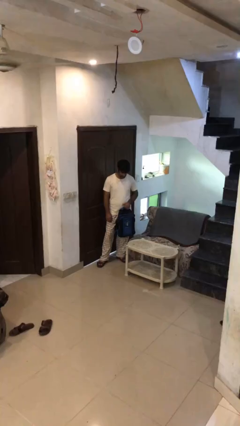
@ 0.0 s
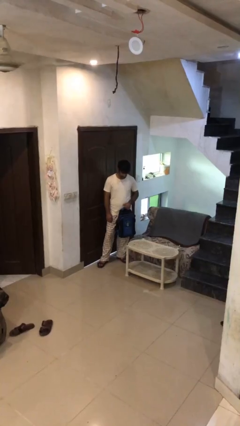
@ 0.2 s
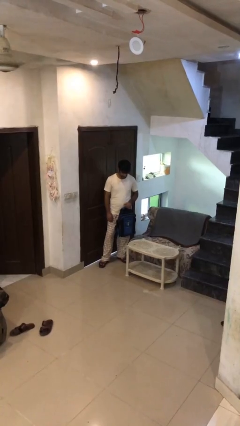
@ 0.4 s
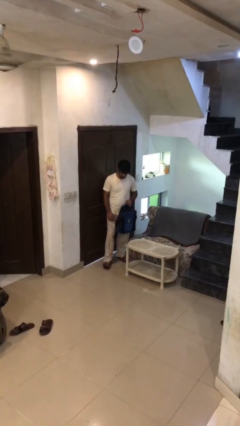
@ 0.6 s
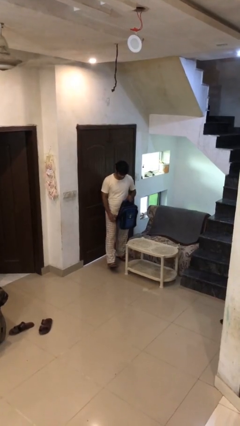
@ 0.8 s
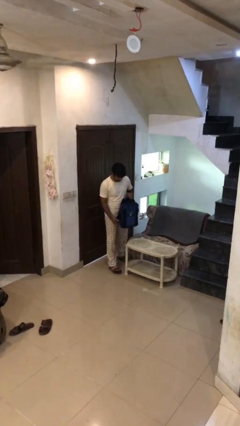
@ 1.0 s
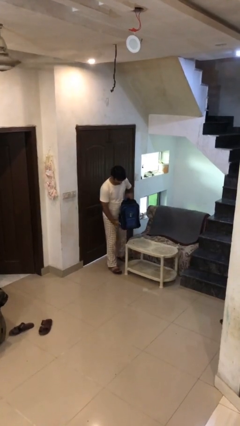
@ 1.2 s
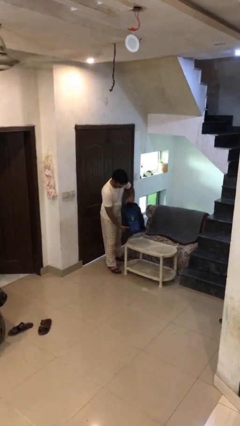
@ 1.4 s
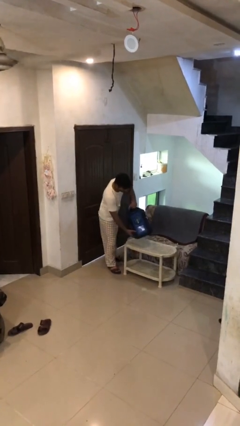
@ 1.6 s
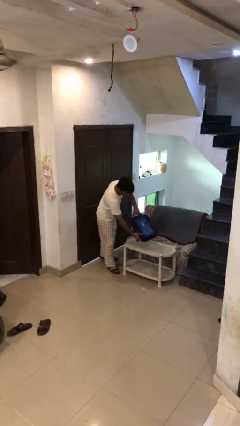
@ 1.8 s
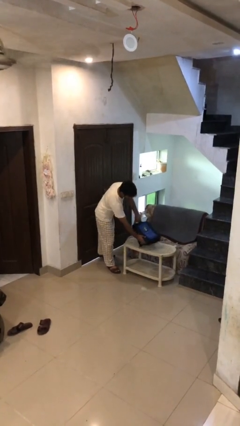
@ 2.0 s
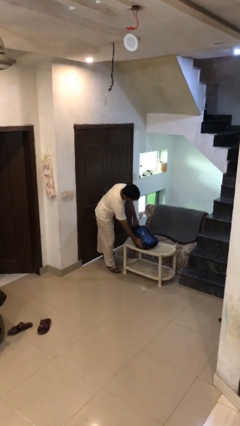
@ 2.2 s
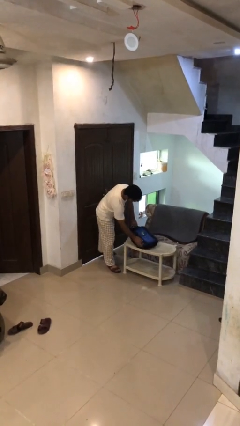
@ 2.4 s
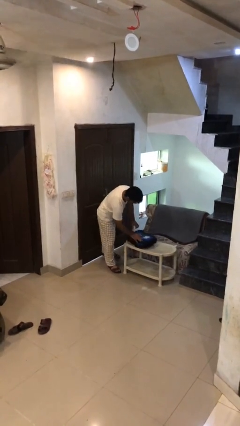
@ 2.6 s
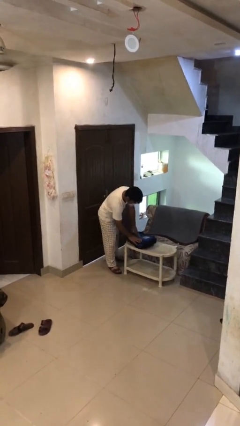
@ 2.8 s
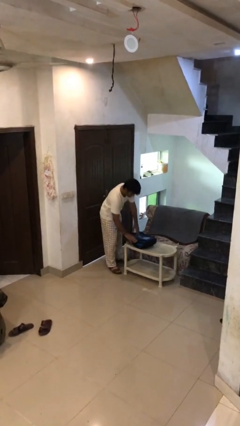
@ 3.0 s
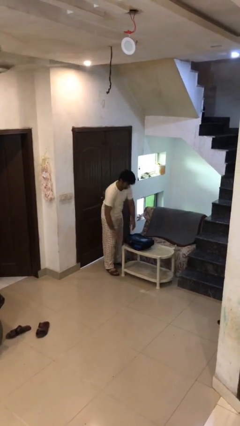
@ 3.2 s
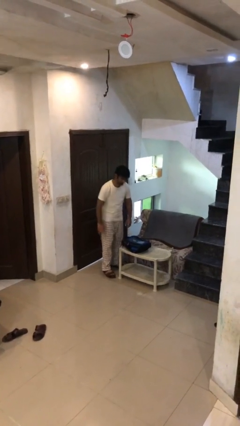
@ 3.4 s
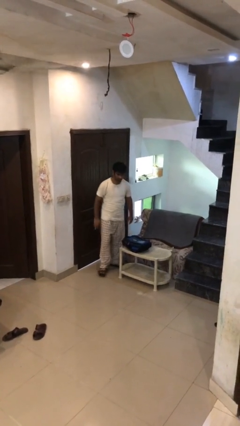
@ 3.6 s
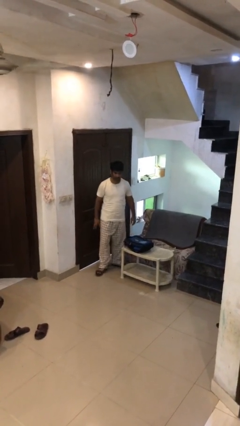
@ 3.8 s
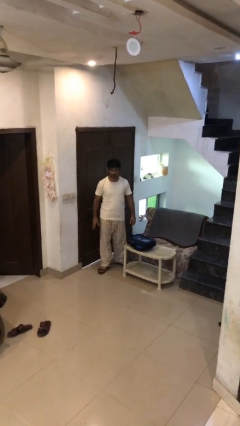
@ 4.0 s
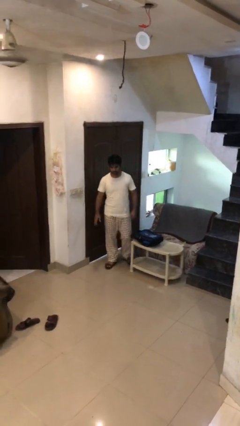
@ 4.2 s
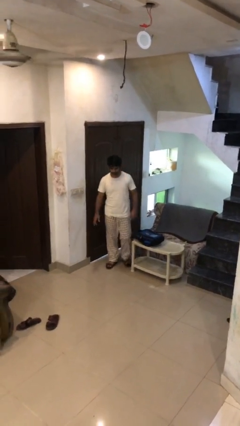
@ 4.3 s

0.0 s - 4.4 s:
person puts down object on table

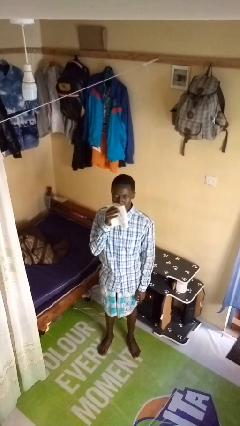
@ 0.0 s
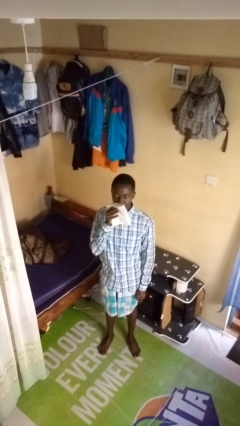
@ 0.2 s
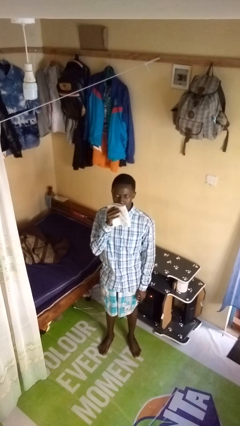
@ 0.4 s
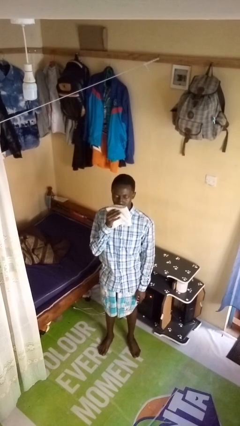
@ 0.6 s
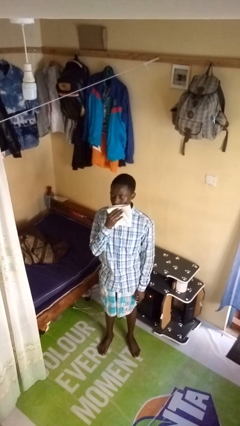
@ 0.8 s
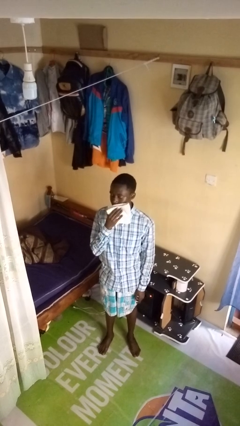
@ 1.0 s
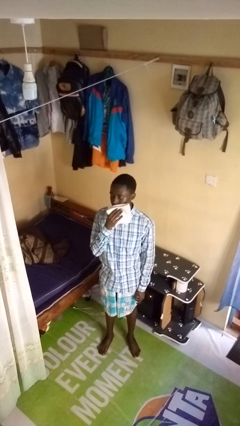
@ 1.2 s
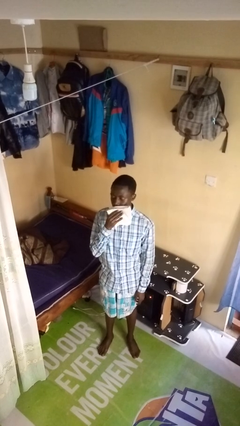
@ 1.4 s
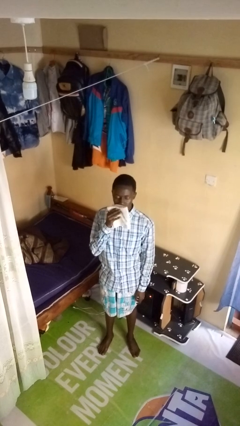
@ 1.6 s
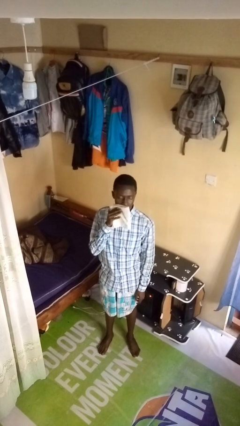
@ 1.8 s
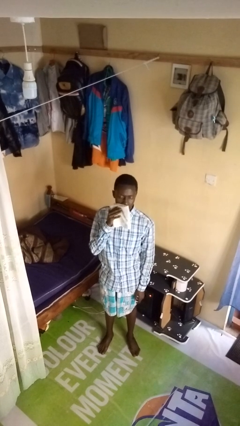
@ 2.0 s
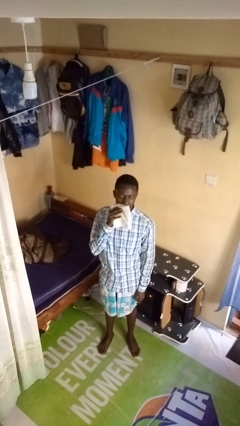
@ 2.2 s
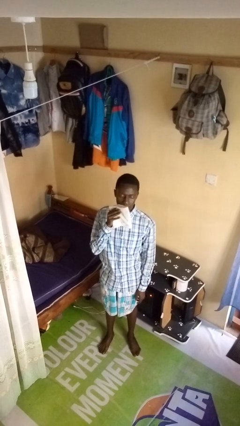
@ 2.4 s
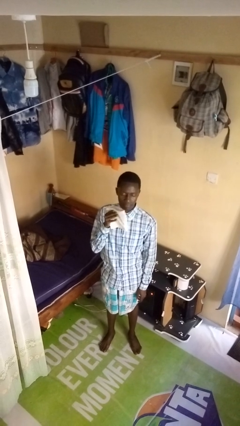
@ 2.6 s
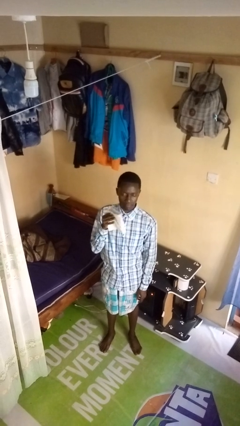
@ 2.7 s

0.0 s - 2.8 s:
person wipes mouth with napkin

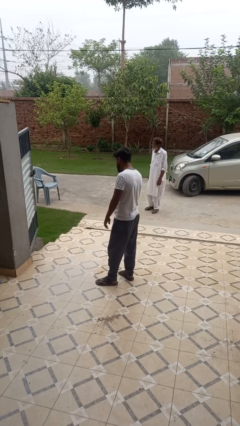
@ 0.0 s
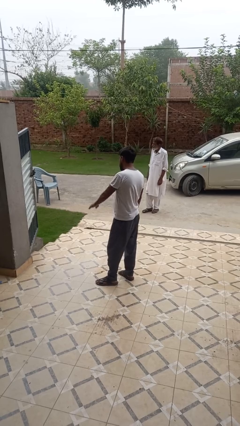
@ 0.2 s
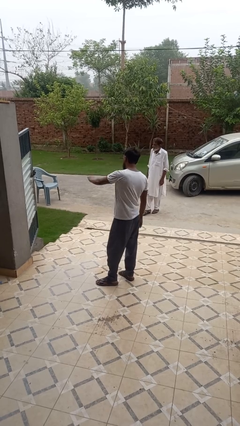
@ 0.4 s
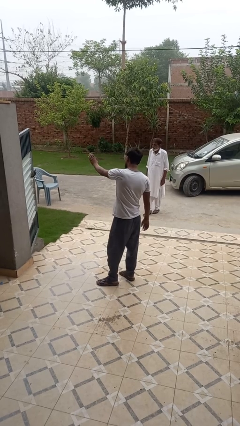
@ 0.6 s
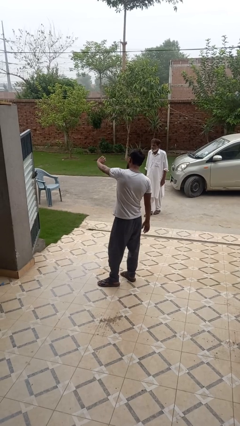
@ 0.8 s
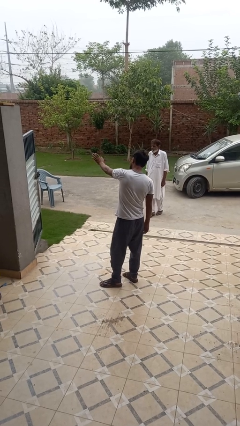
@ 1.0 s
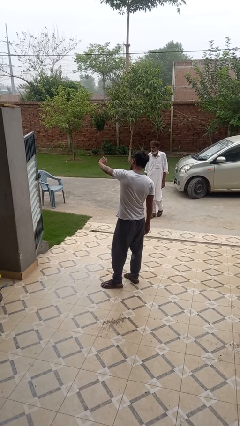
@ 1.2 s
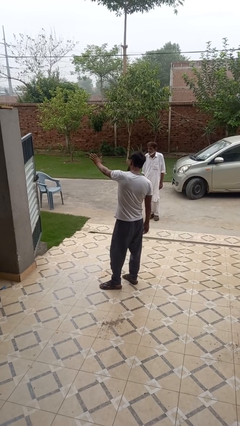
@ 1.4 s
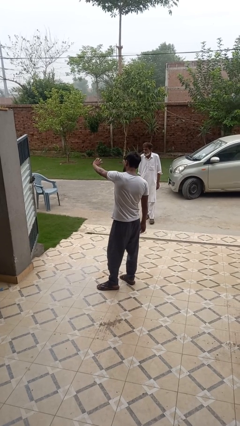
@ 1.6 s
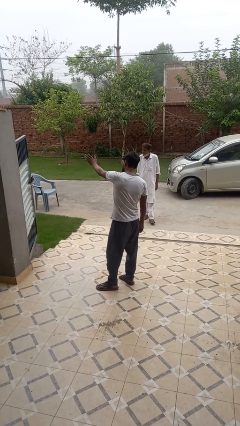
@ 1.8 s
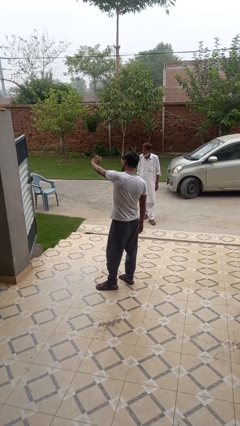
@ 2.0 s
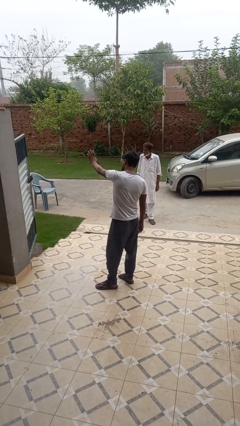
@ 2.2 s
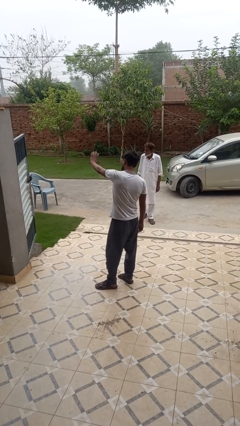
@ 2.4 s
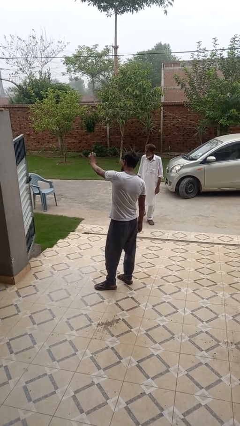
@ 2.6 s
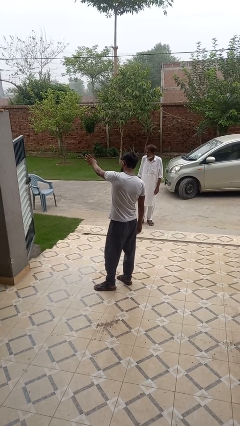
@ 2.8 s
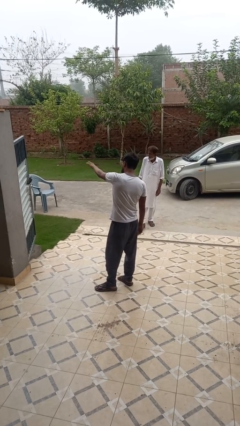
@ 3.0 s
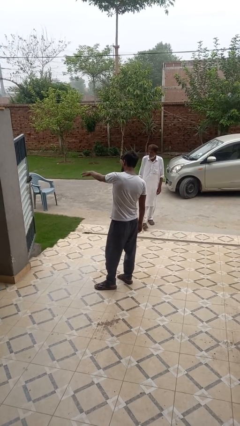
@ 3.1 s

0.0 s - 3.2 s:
person waves at person

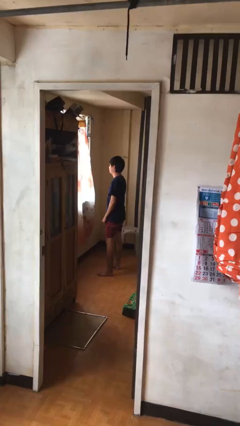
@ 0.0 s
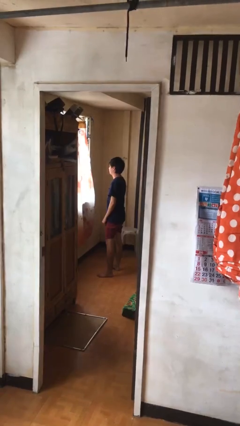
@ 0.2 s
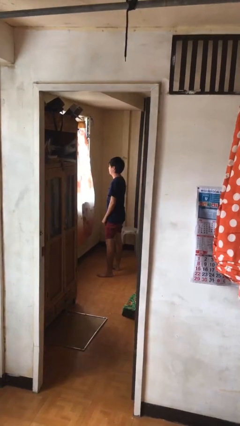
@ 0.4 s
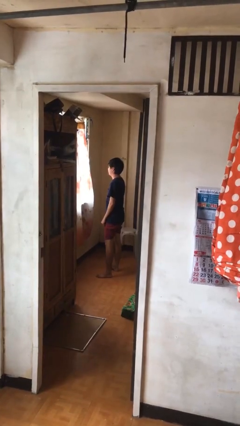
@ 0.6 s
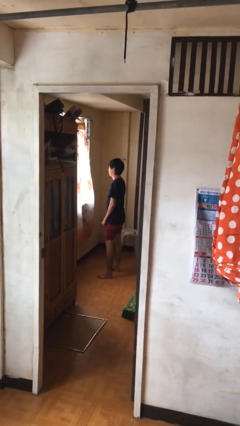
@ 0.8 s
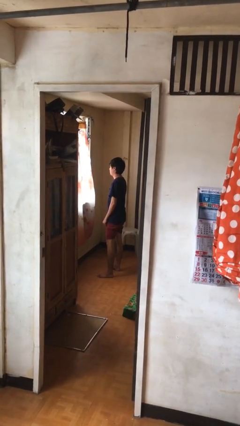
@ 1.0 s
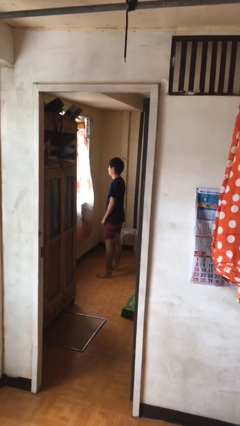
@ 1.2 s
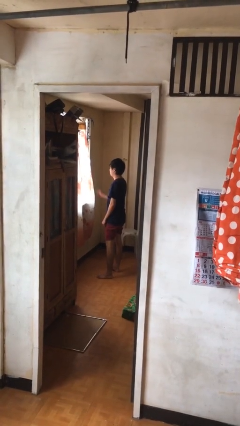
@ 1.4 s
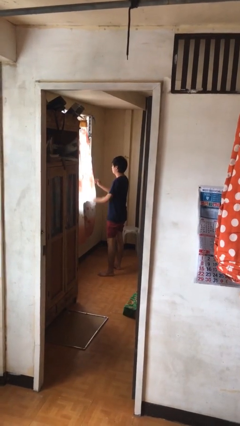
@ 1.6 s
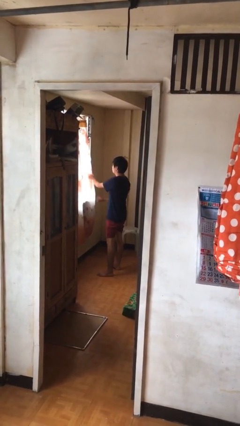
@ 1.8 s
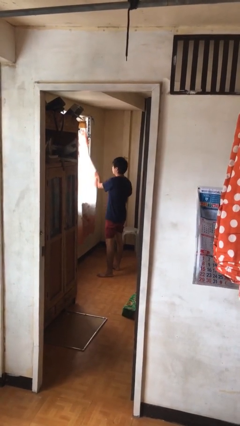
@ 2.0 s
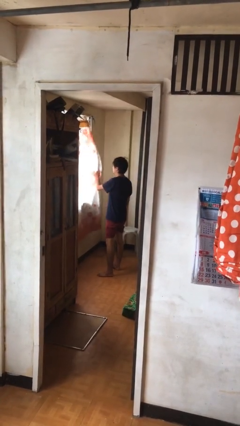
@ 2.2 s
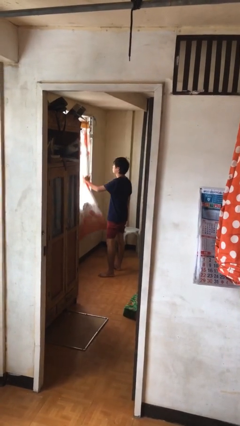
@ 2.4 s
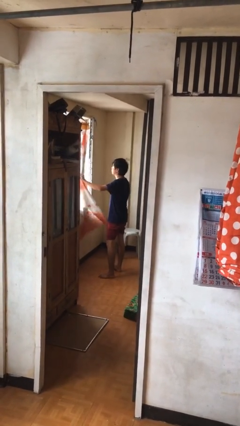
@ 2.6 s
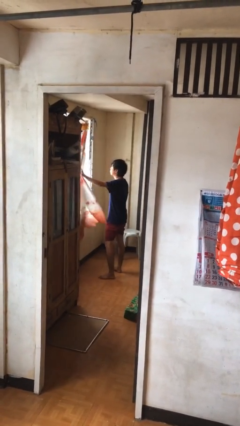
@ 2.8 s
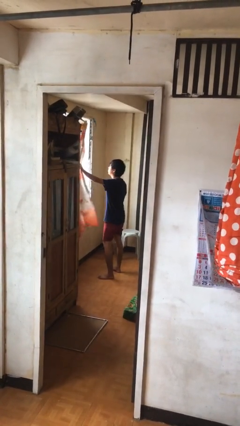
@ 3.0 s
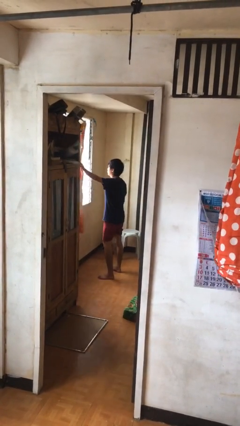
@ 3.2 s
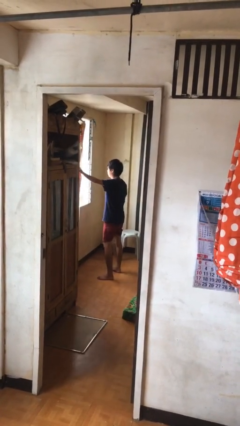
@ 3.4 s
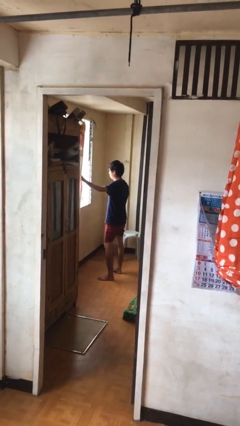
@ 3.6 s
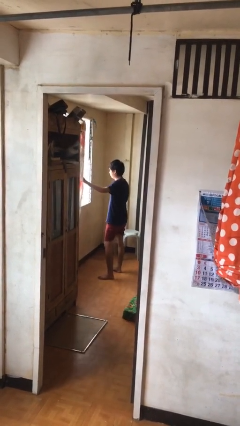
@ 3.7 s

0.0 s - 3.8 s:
person opens curtains

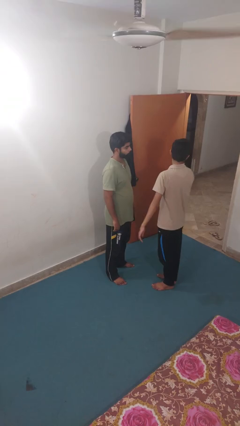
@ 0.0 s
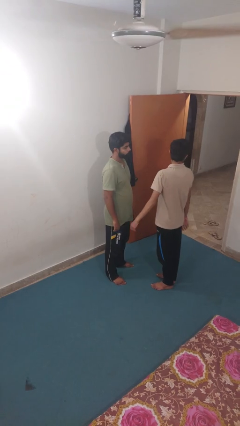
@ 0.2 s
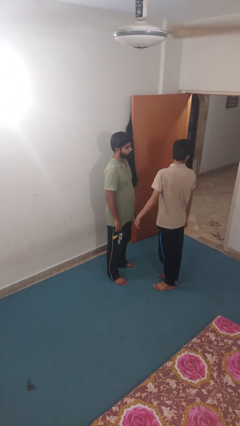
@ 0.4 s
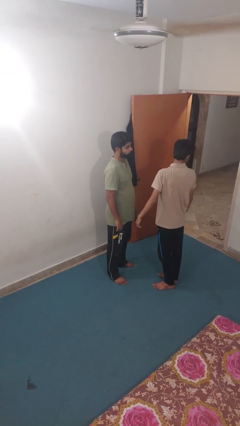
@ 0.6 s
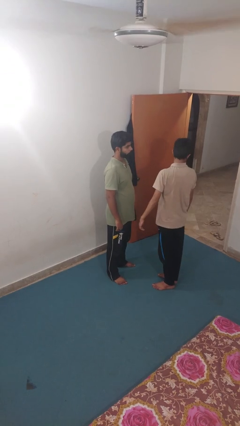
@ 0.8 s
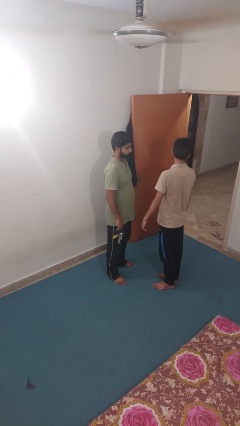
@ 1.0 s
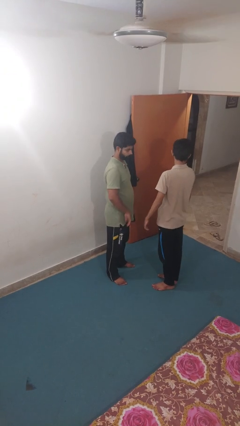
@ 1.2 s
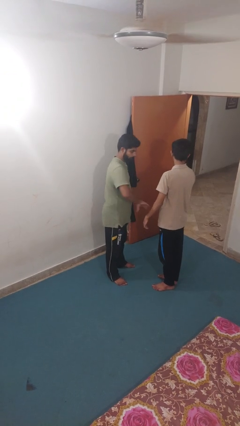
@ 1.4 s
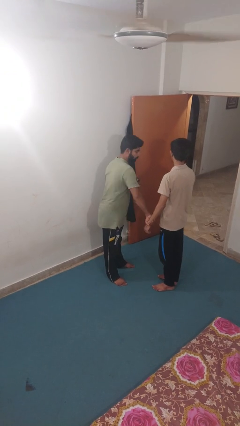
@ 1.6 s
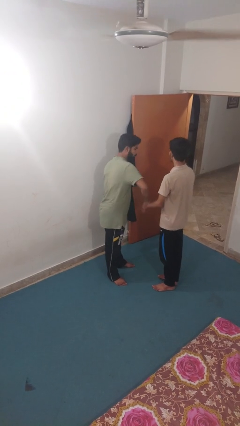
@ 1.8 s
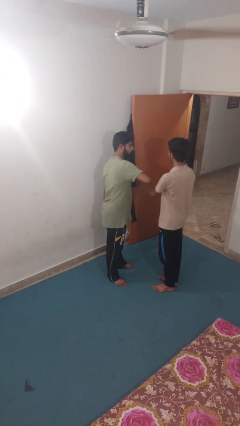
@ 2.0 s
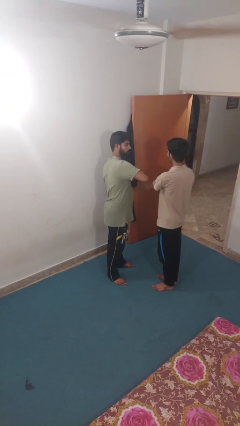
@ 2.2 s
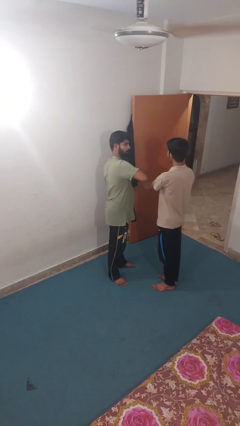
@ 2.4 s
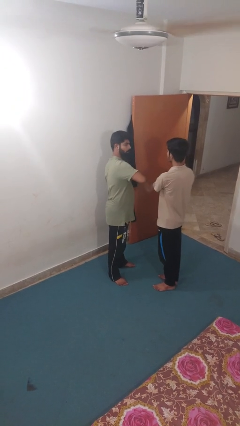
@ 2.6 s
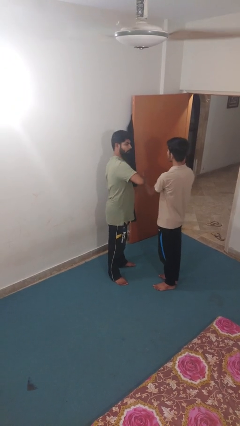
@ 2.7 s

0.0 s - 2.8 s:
person grabs person by forearm

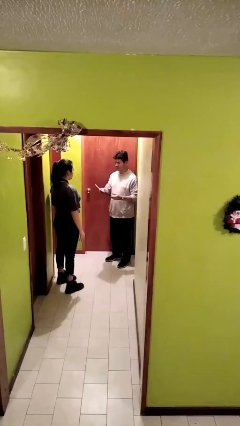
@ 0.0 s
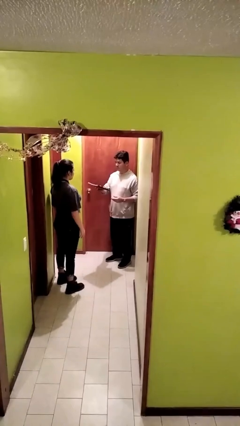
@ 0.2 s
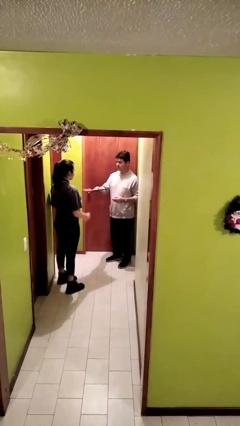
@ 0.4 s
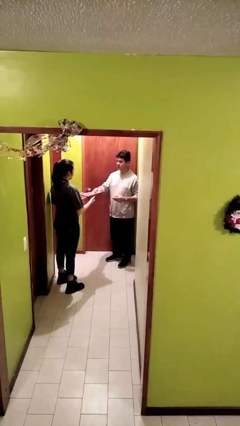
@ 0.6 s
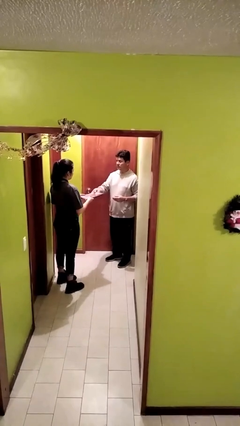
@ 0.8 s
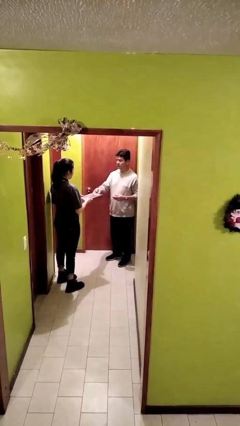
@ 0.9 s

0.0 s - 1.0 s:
person transfers object to person
